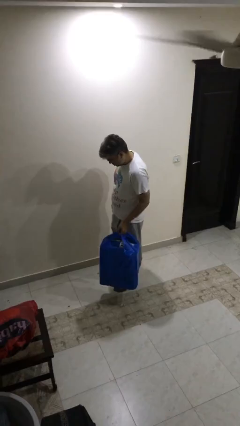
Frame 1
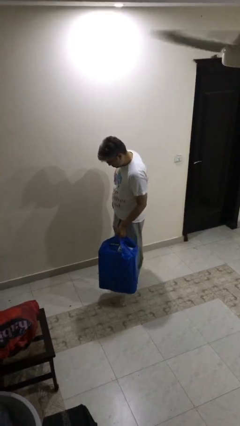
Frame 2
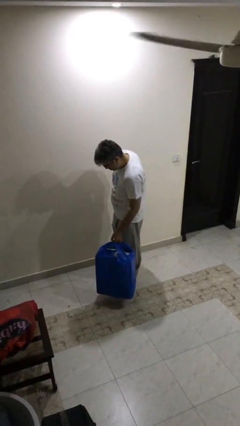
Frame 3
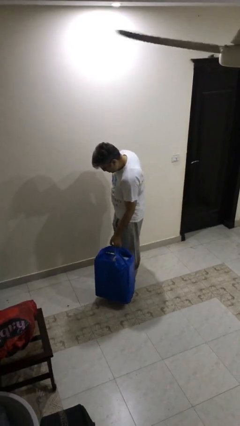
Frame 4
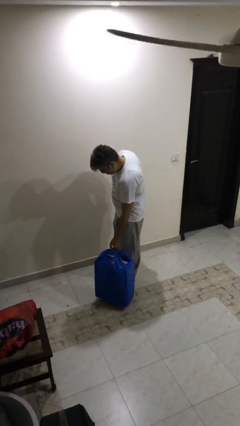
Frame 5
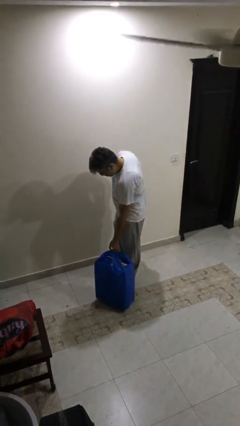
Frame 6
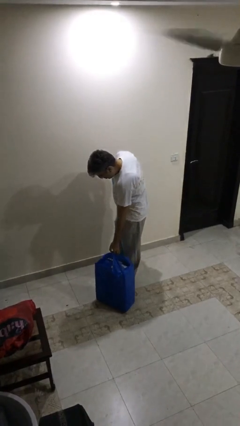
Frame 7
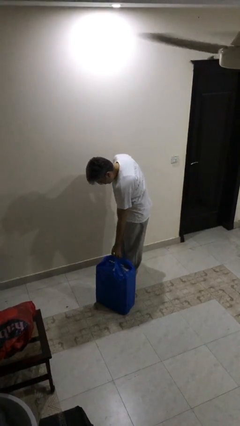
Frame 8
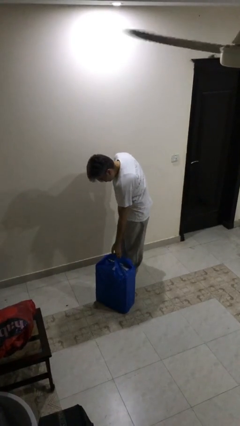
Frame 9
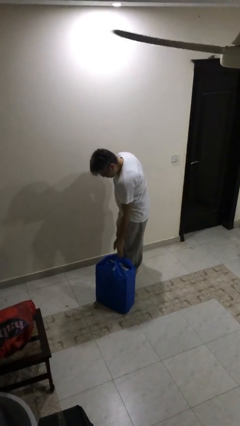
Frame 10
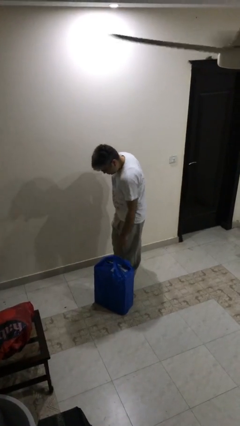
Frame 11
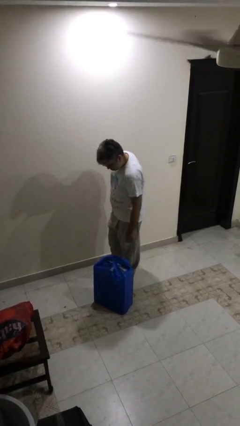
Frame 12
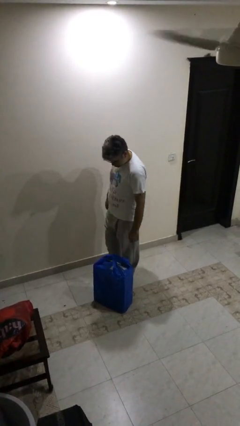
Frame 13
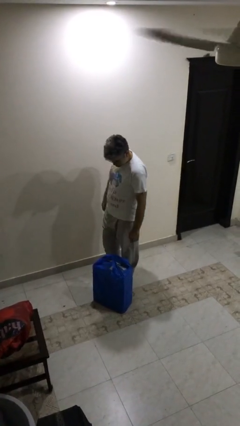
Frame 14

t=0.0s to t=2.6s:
person puts down object on floor

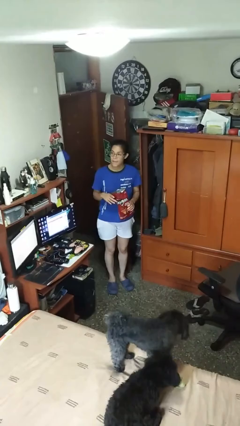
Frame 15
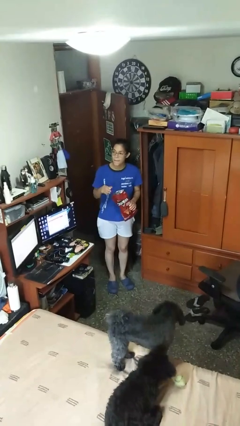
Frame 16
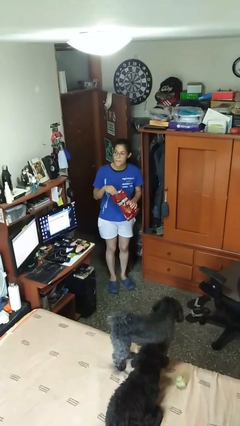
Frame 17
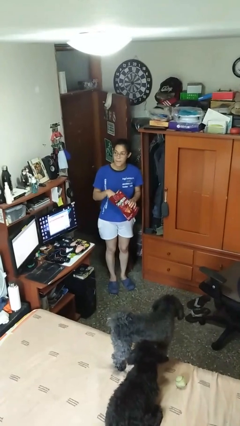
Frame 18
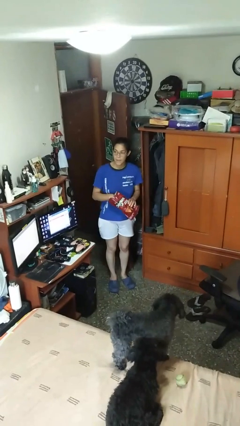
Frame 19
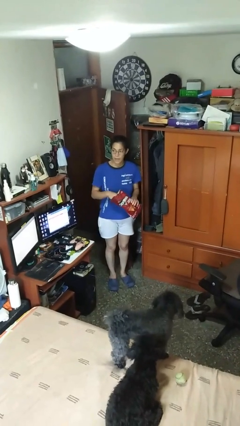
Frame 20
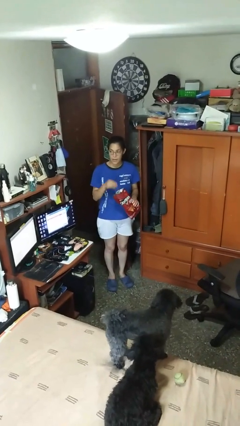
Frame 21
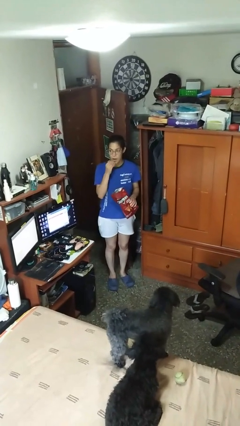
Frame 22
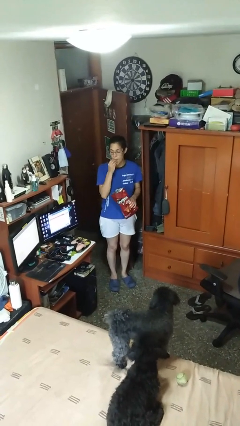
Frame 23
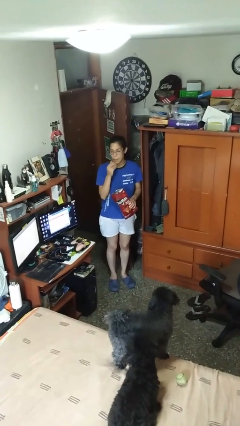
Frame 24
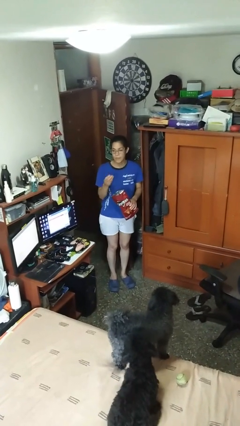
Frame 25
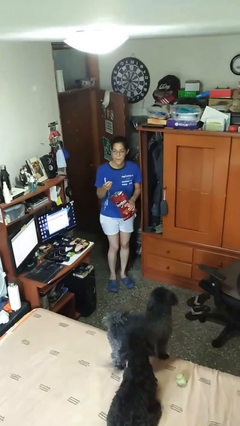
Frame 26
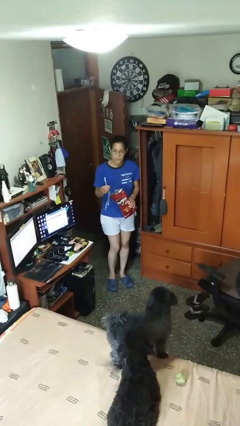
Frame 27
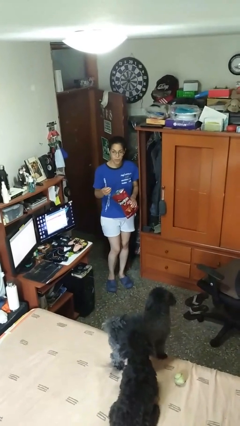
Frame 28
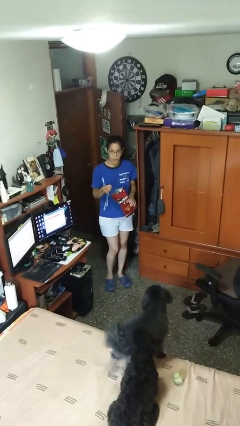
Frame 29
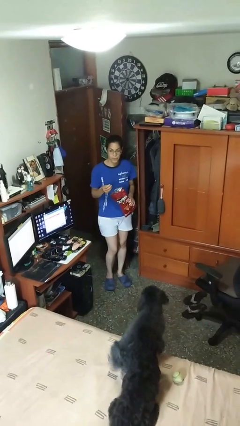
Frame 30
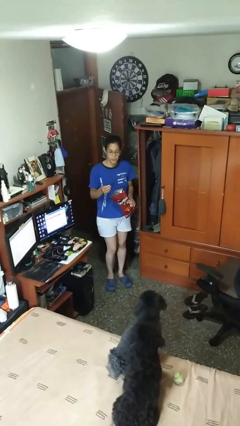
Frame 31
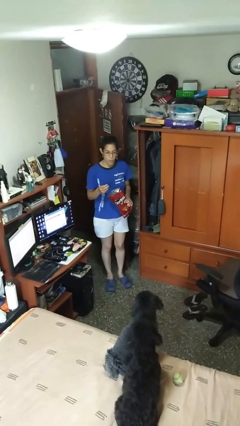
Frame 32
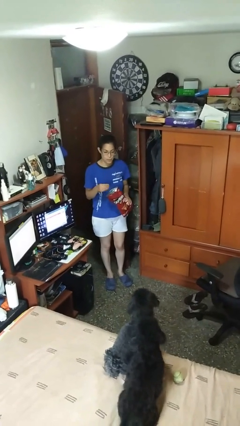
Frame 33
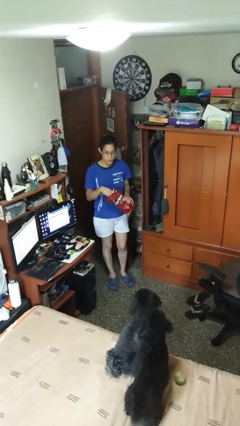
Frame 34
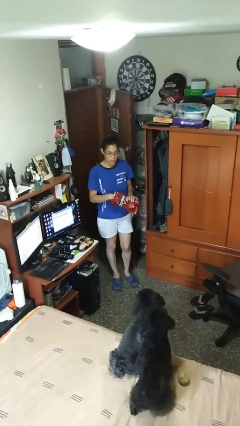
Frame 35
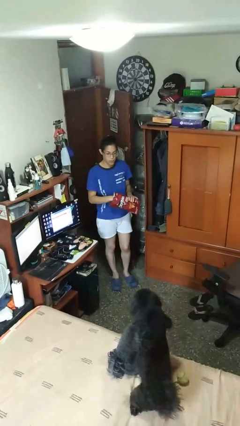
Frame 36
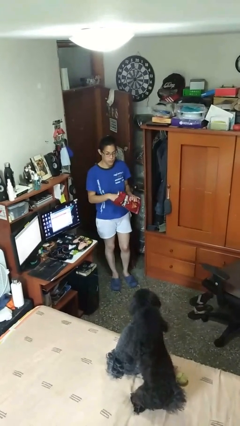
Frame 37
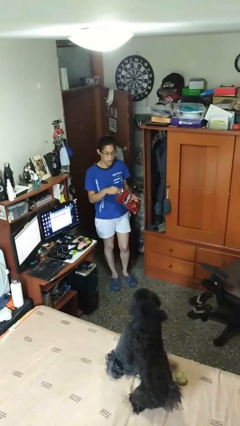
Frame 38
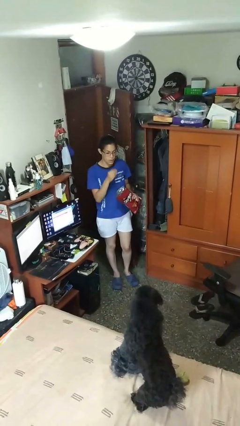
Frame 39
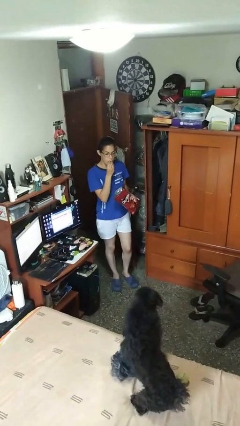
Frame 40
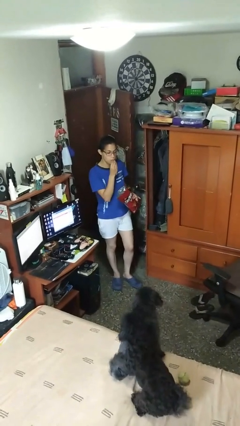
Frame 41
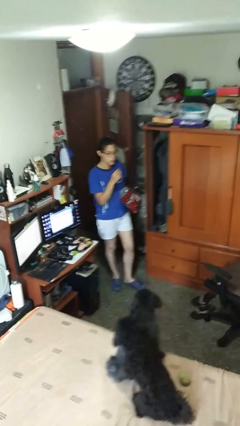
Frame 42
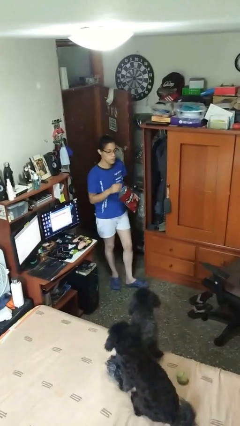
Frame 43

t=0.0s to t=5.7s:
person eats snack from bag

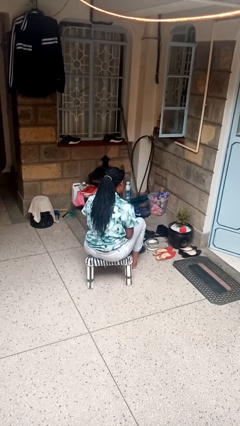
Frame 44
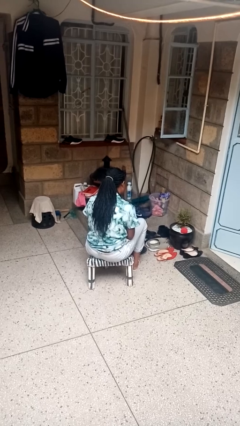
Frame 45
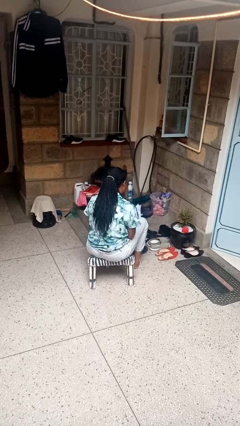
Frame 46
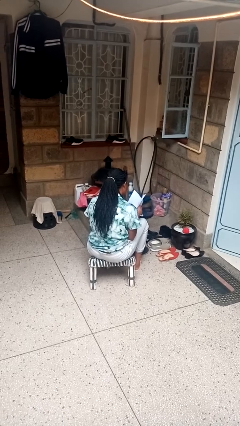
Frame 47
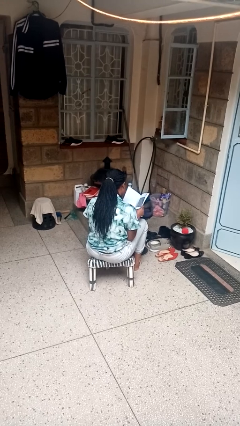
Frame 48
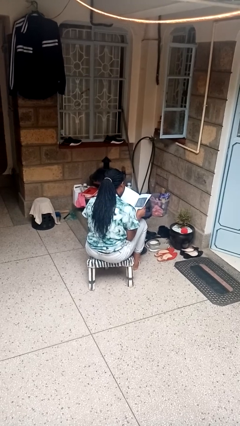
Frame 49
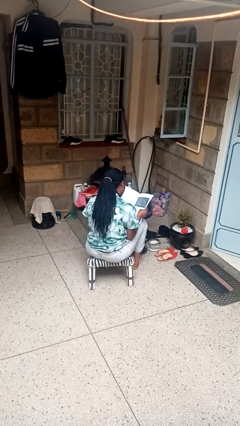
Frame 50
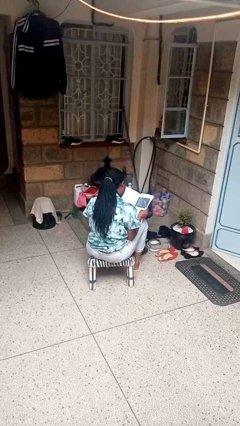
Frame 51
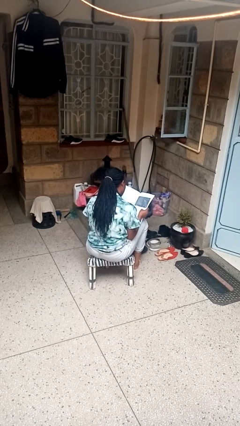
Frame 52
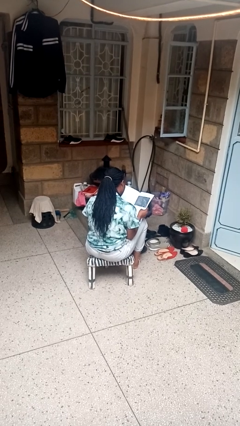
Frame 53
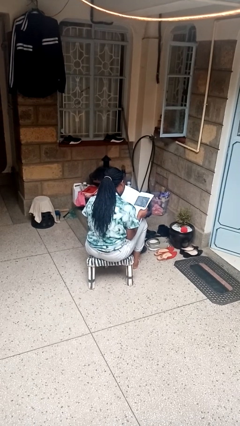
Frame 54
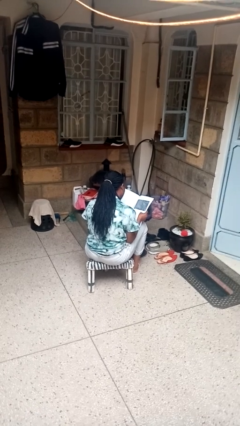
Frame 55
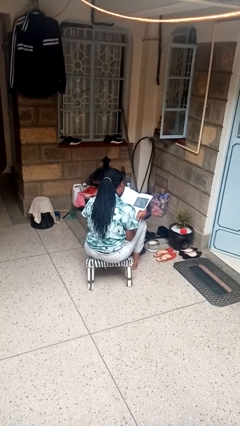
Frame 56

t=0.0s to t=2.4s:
person reads magazine

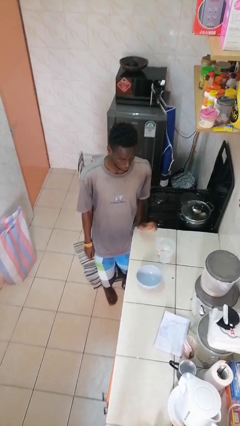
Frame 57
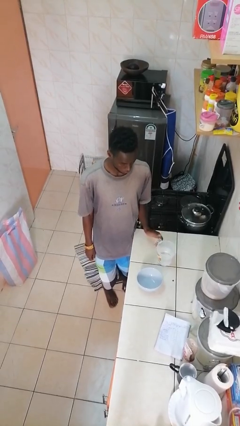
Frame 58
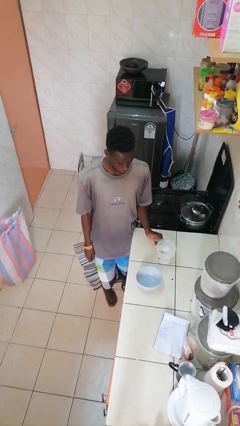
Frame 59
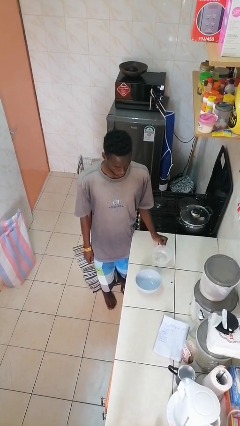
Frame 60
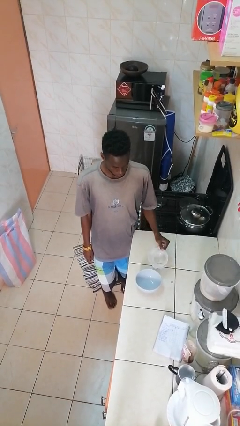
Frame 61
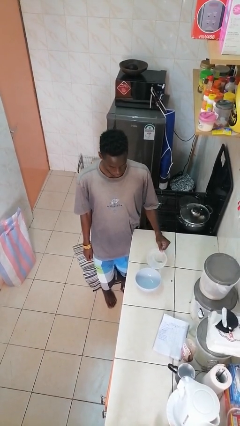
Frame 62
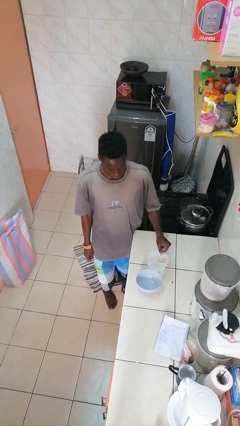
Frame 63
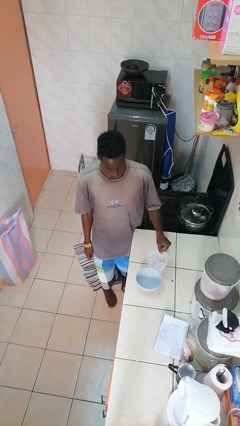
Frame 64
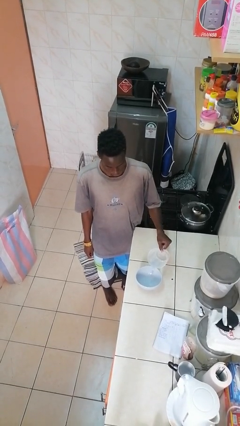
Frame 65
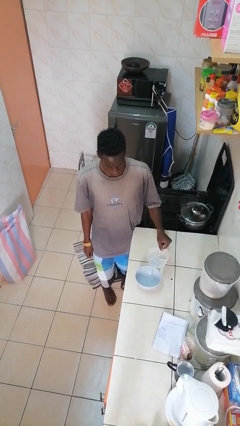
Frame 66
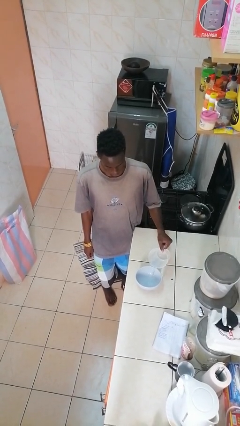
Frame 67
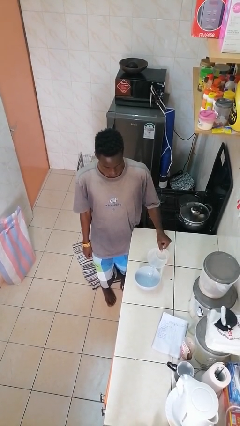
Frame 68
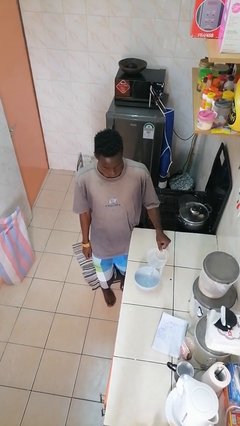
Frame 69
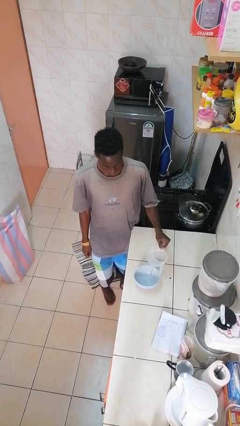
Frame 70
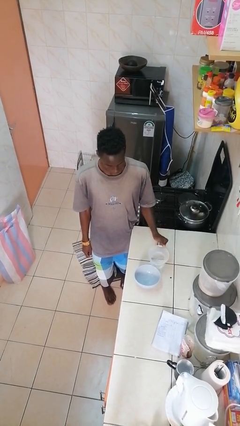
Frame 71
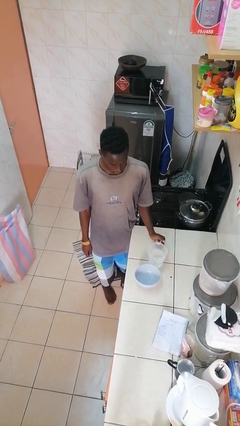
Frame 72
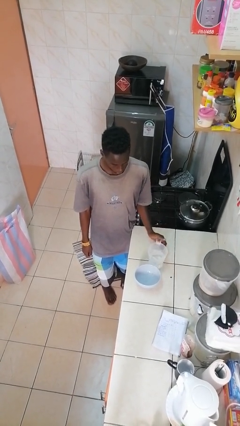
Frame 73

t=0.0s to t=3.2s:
person pours into bowl

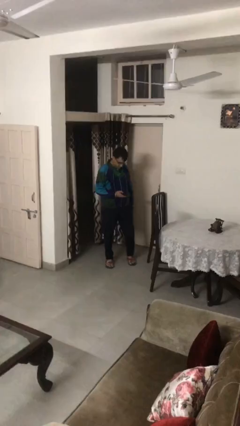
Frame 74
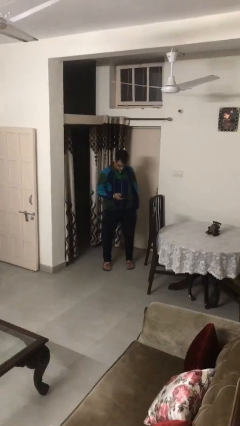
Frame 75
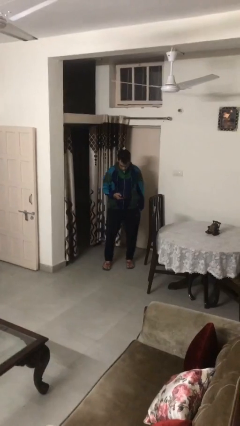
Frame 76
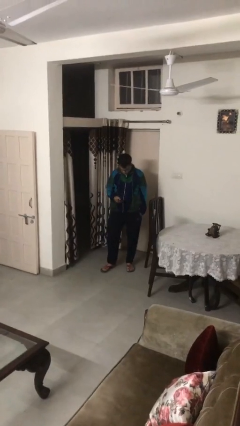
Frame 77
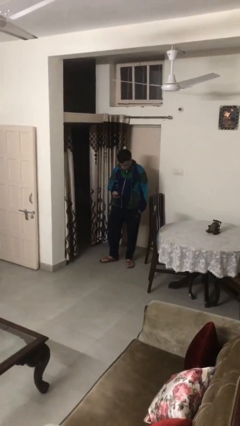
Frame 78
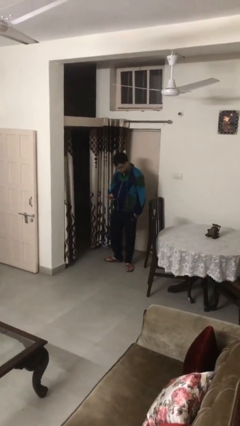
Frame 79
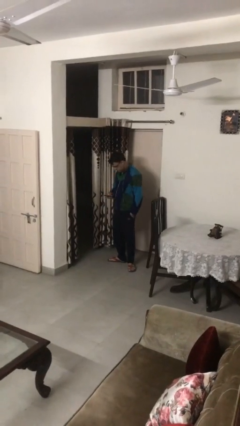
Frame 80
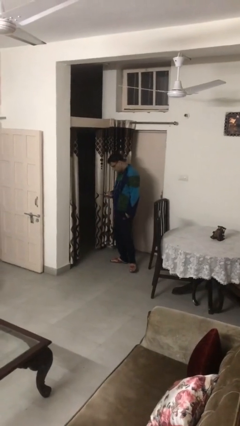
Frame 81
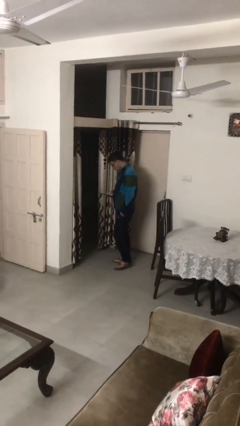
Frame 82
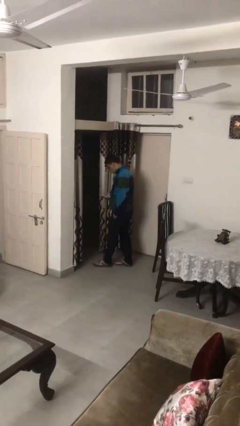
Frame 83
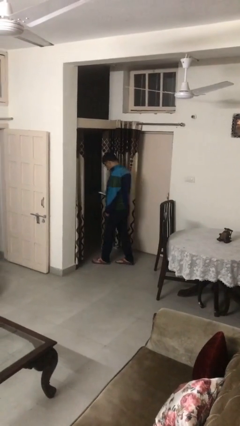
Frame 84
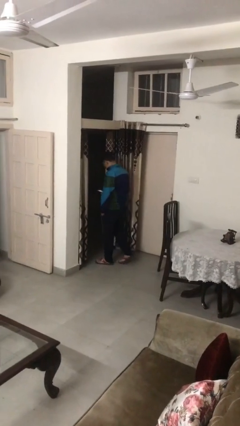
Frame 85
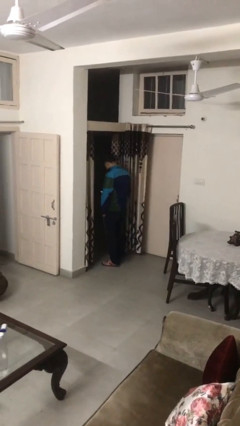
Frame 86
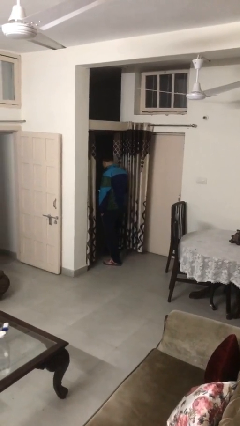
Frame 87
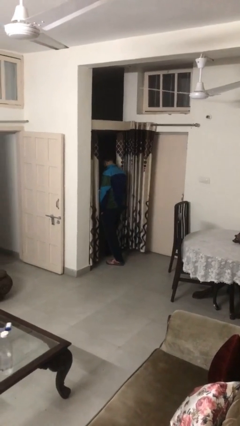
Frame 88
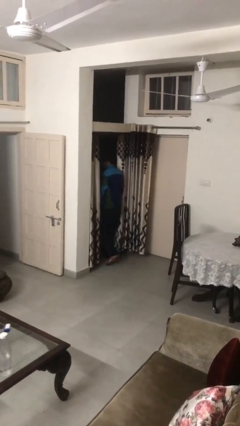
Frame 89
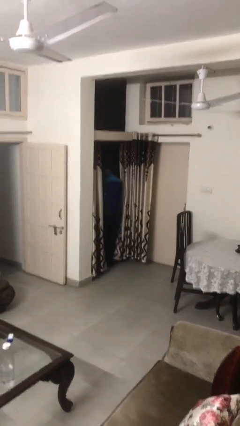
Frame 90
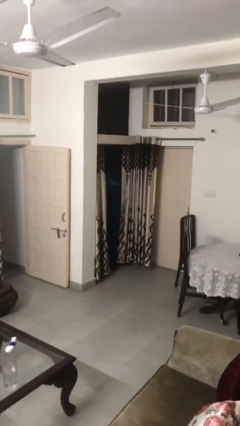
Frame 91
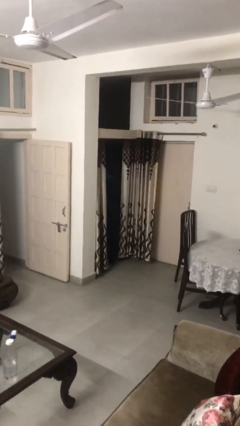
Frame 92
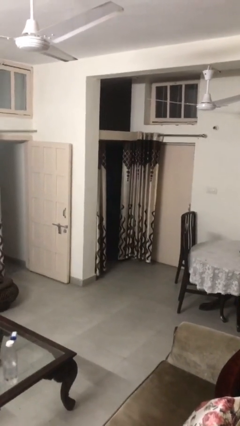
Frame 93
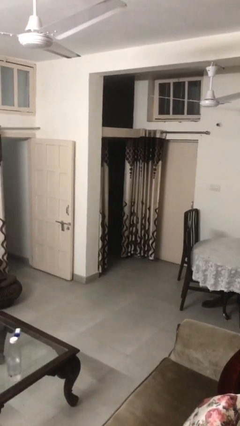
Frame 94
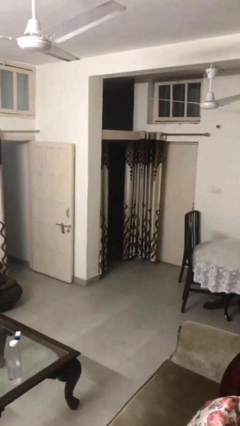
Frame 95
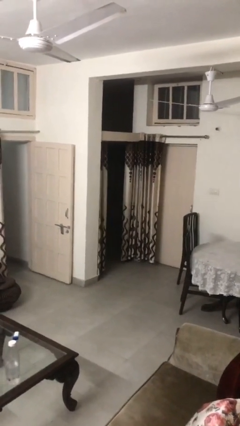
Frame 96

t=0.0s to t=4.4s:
person exits scene through structure
